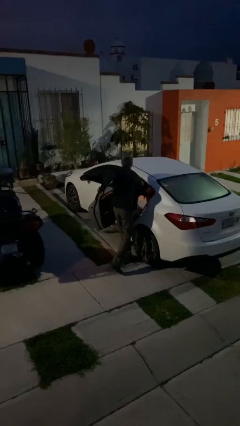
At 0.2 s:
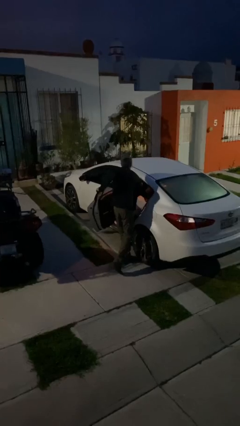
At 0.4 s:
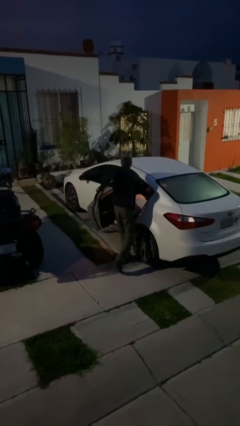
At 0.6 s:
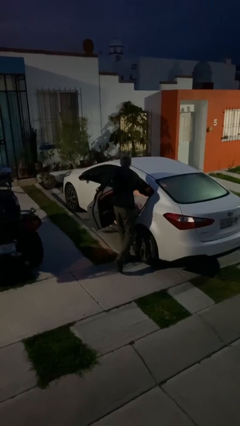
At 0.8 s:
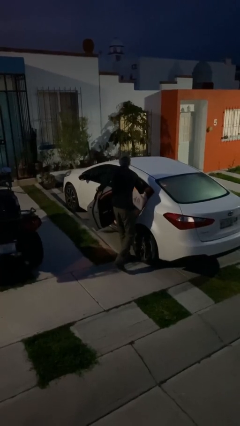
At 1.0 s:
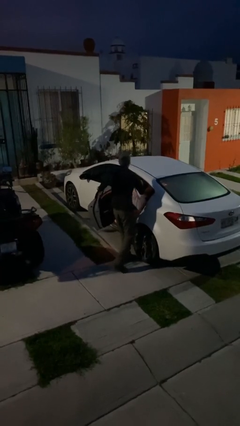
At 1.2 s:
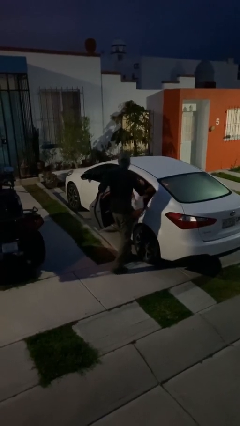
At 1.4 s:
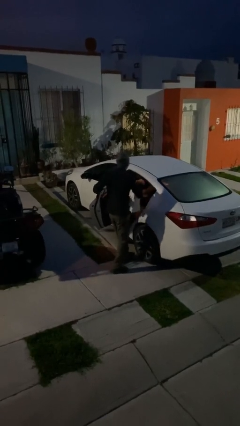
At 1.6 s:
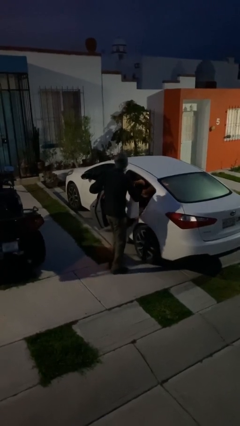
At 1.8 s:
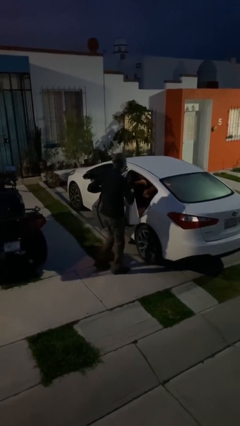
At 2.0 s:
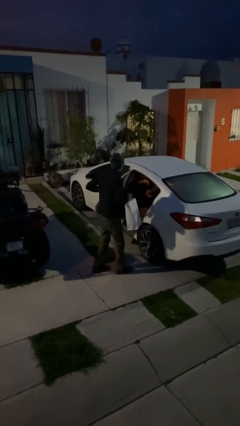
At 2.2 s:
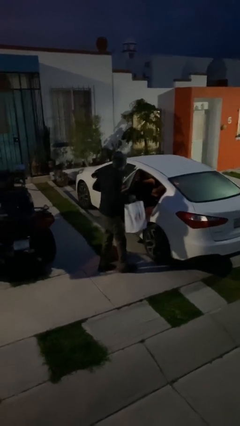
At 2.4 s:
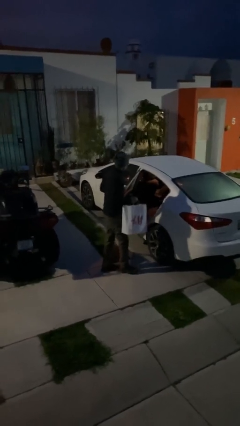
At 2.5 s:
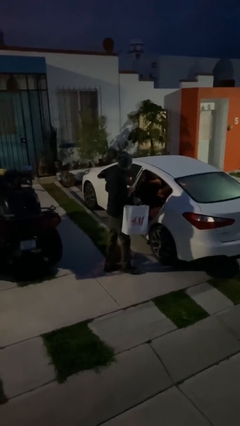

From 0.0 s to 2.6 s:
person unloads car

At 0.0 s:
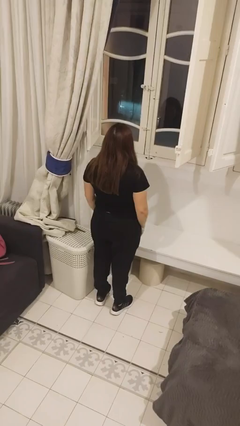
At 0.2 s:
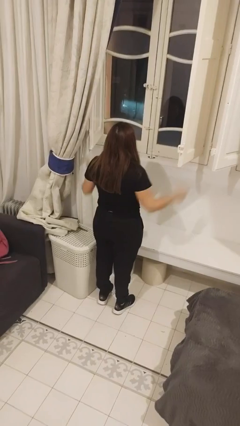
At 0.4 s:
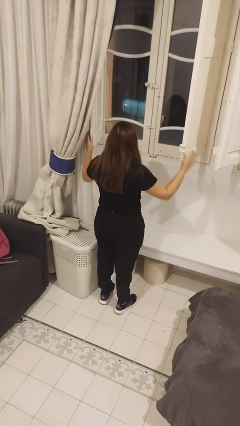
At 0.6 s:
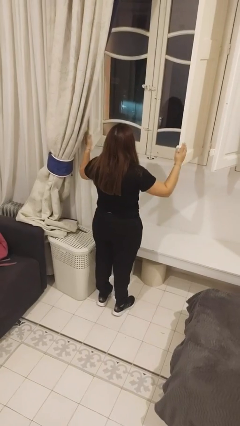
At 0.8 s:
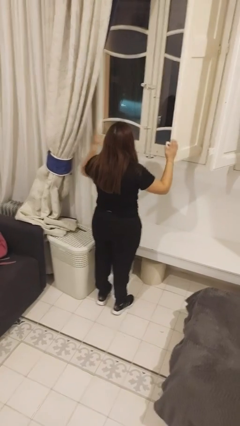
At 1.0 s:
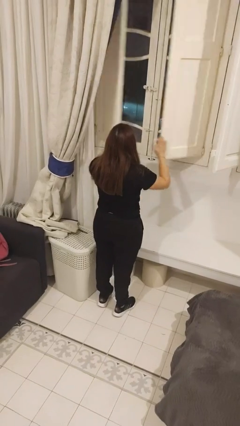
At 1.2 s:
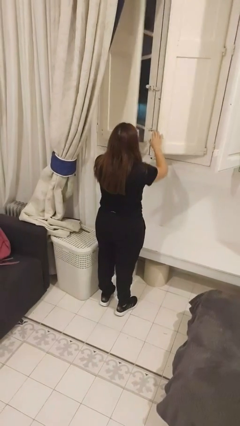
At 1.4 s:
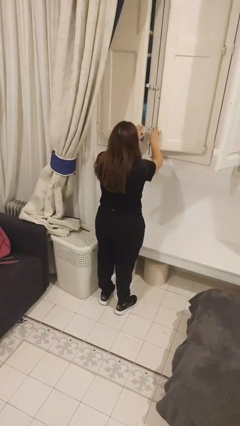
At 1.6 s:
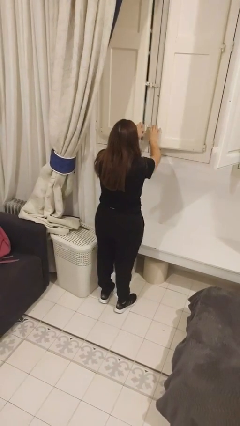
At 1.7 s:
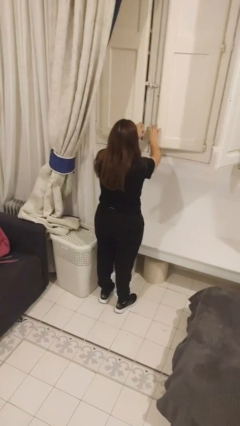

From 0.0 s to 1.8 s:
person closes home window

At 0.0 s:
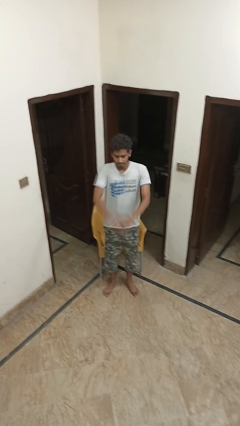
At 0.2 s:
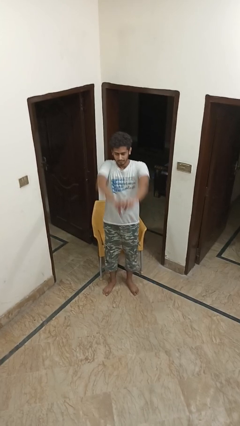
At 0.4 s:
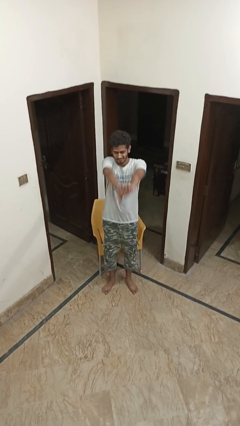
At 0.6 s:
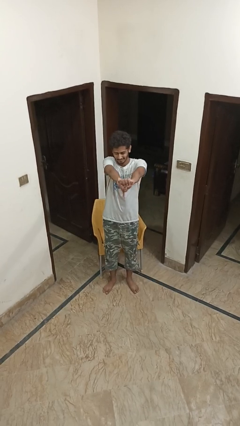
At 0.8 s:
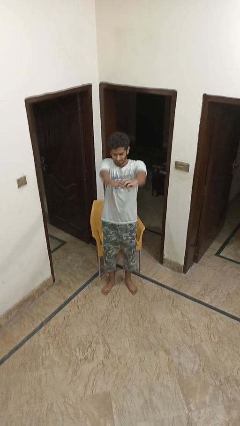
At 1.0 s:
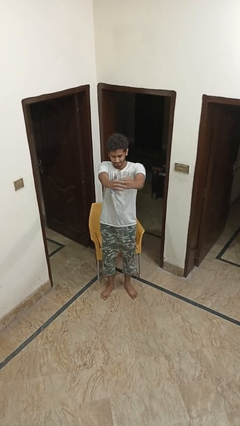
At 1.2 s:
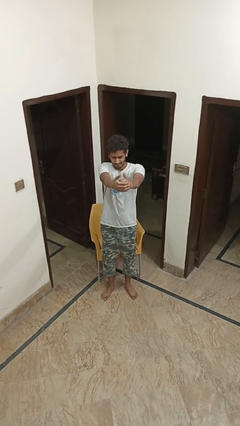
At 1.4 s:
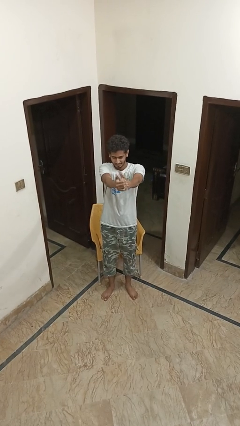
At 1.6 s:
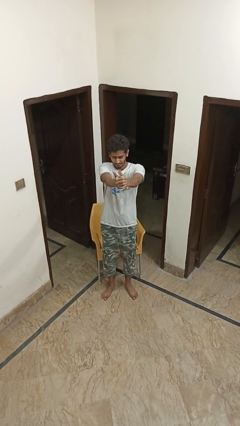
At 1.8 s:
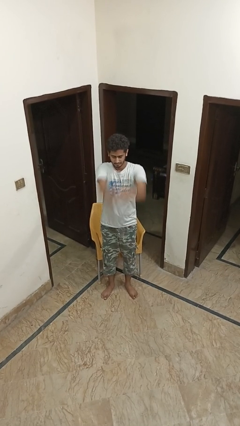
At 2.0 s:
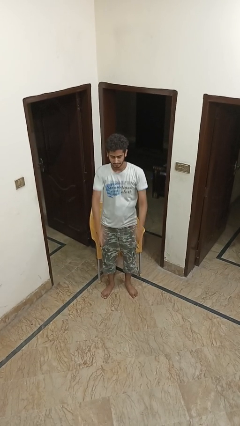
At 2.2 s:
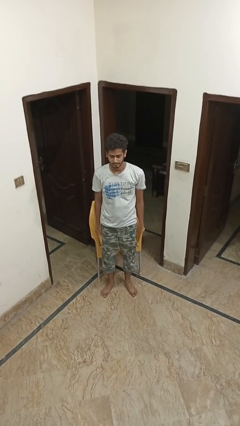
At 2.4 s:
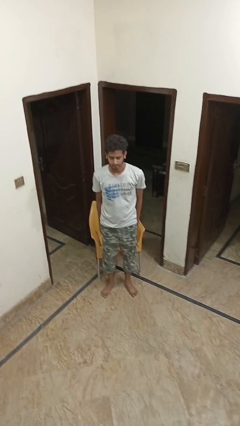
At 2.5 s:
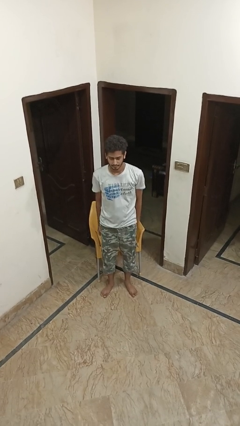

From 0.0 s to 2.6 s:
person cracks knuckles

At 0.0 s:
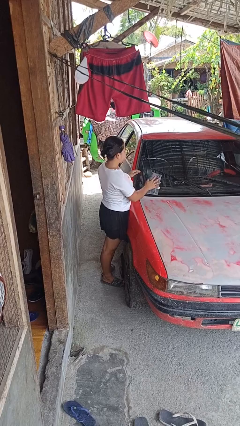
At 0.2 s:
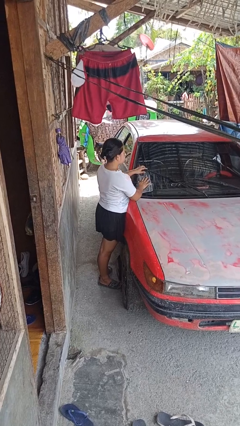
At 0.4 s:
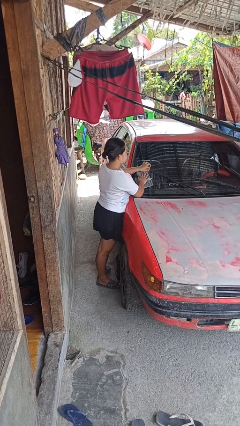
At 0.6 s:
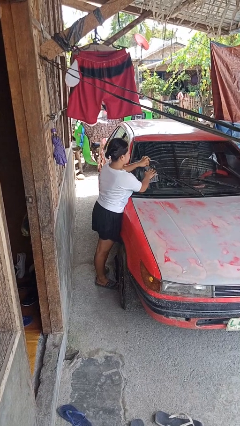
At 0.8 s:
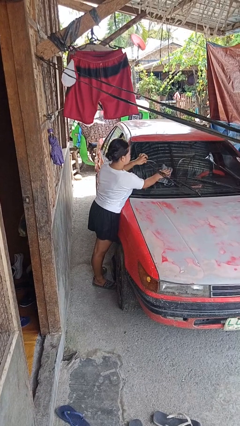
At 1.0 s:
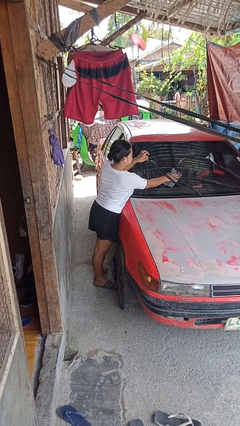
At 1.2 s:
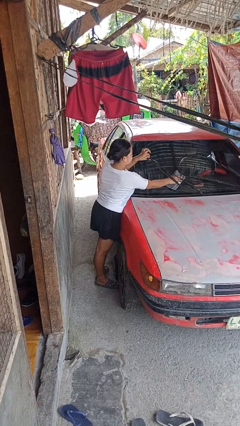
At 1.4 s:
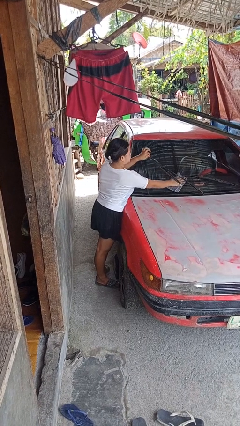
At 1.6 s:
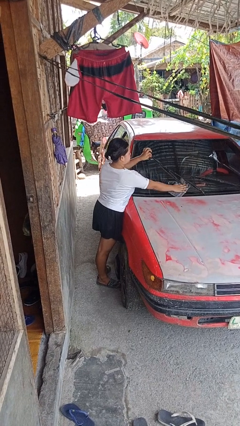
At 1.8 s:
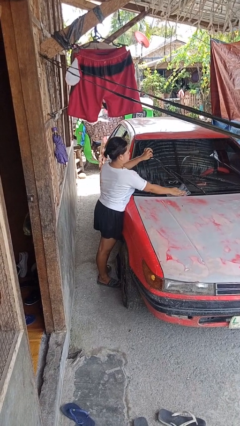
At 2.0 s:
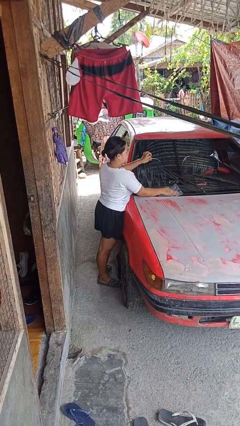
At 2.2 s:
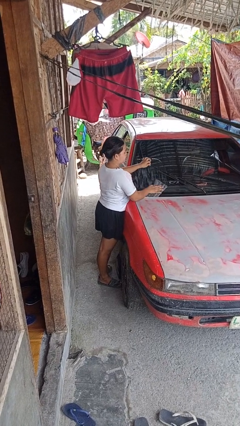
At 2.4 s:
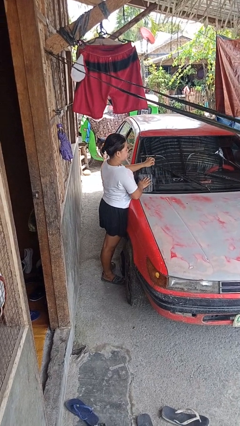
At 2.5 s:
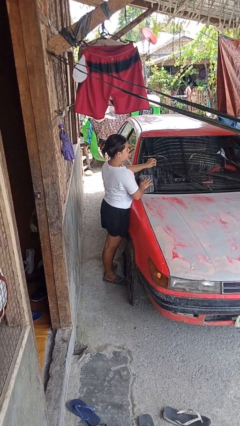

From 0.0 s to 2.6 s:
person polishes car with rag

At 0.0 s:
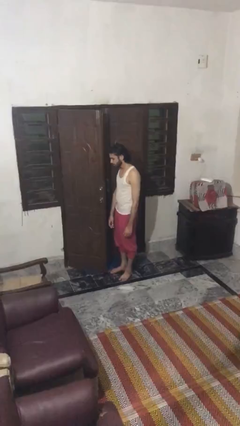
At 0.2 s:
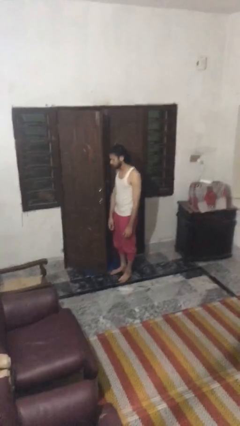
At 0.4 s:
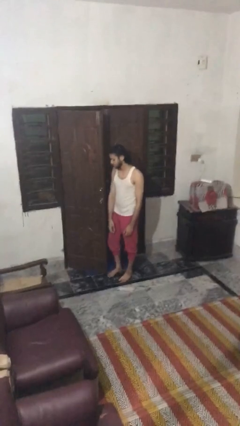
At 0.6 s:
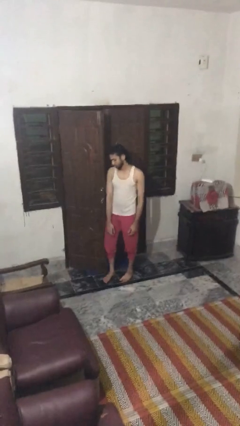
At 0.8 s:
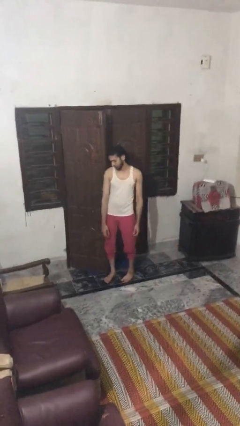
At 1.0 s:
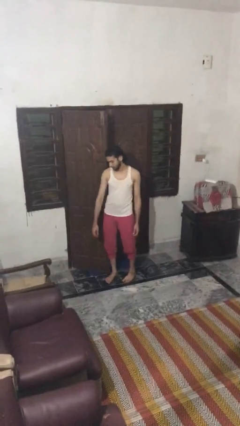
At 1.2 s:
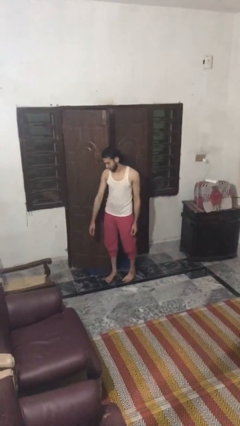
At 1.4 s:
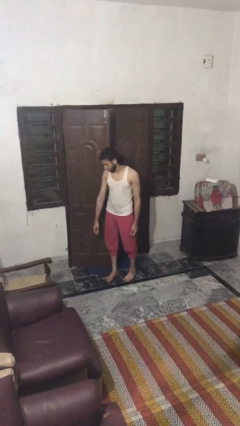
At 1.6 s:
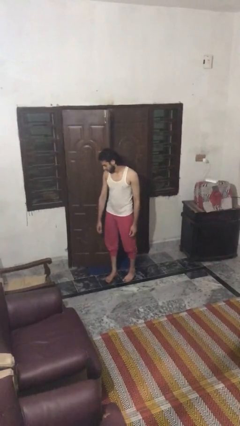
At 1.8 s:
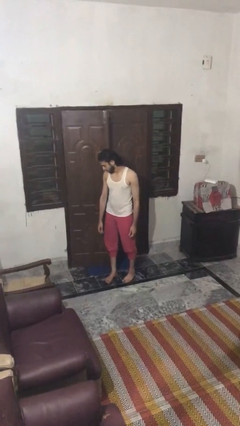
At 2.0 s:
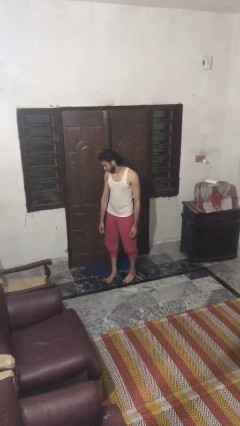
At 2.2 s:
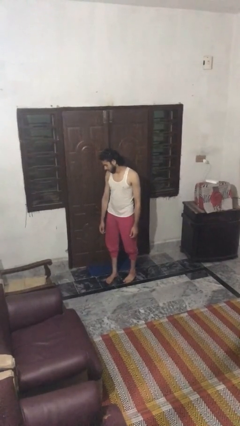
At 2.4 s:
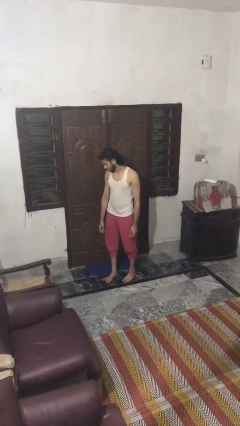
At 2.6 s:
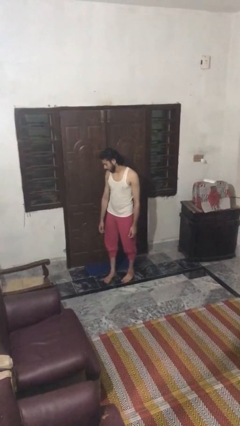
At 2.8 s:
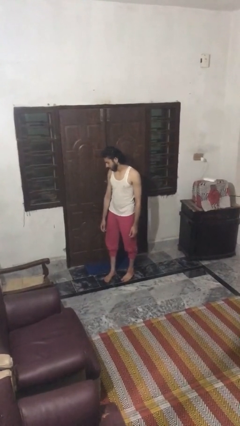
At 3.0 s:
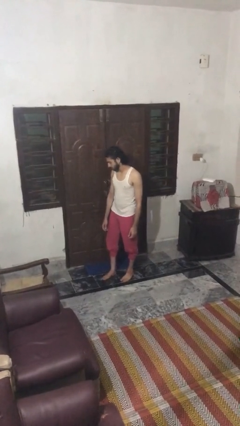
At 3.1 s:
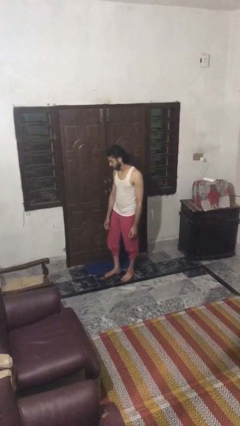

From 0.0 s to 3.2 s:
person closes door with hip

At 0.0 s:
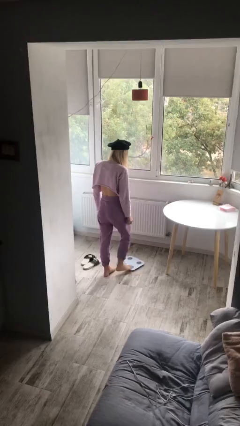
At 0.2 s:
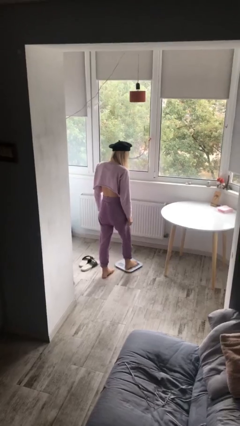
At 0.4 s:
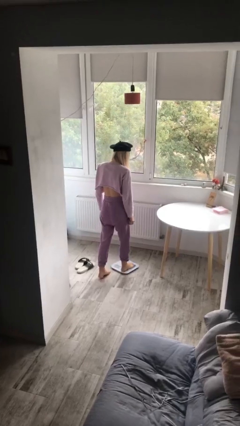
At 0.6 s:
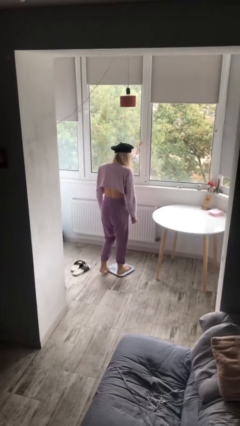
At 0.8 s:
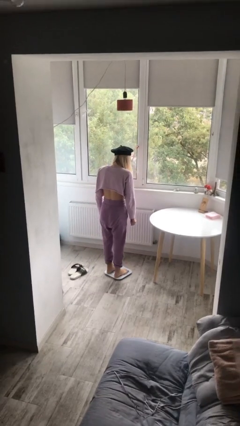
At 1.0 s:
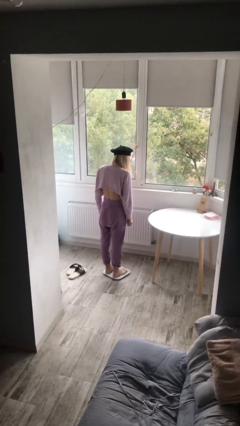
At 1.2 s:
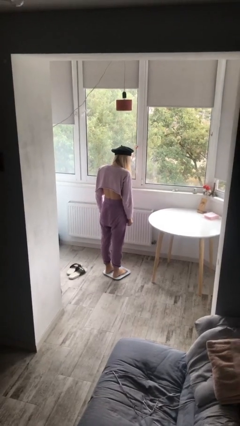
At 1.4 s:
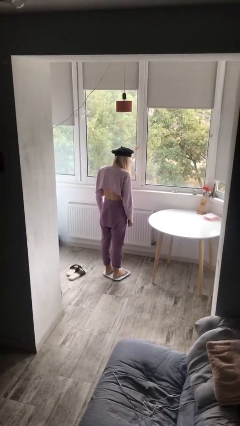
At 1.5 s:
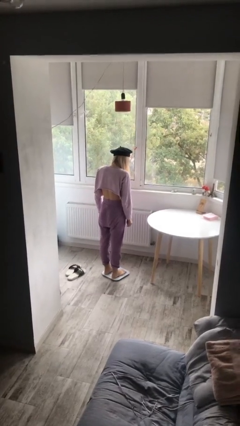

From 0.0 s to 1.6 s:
person uses bodyweight scale

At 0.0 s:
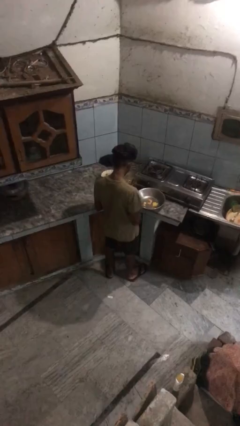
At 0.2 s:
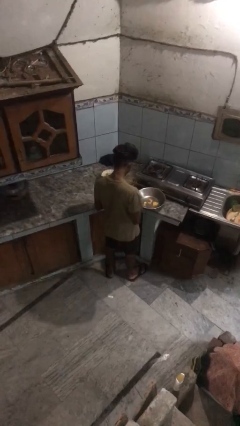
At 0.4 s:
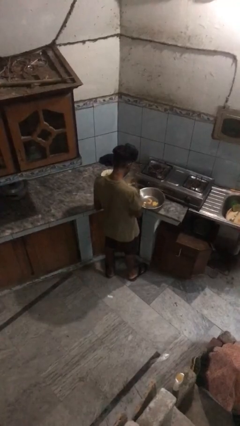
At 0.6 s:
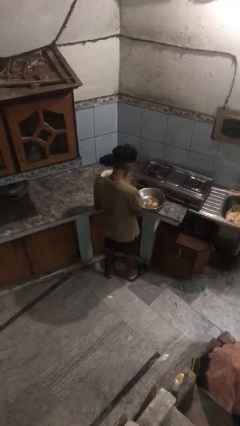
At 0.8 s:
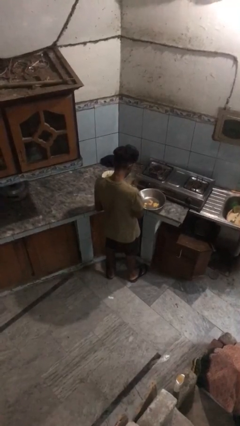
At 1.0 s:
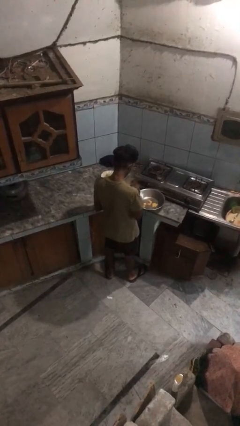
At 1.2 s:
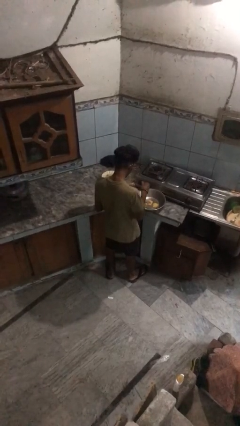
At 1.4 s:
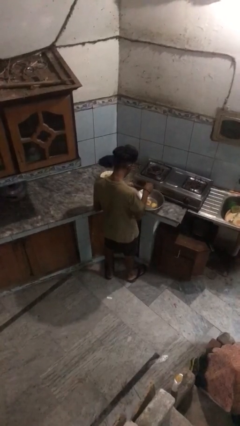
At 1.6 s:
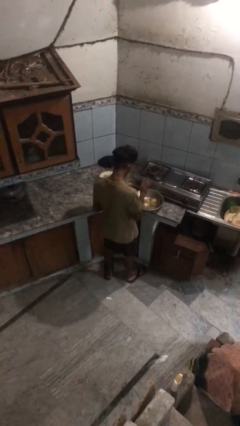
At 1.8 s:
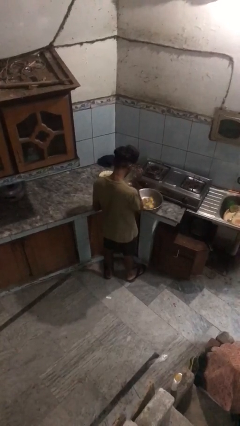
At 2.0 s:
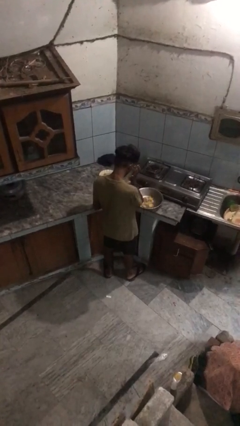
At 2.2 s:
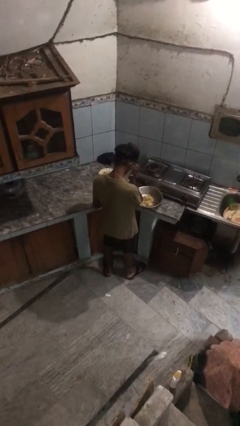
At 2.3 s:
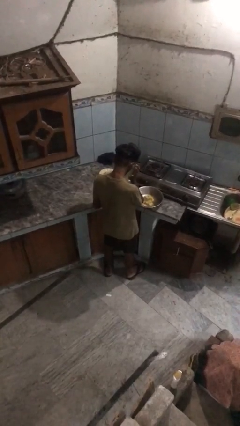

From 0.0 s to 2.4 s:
person pours into bowl
